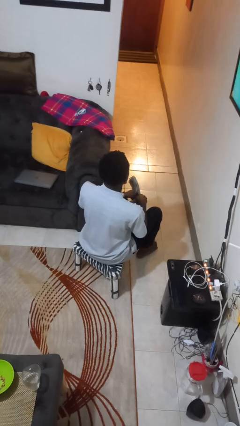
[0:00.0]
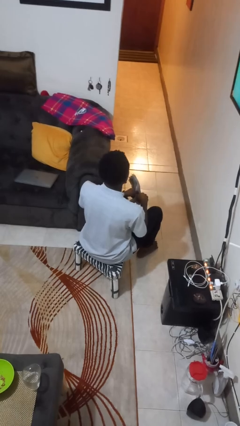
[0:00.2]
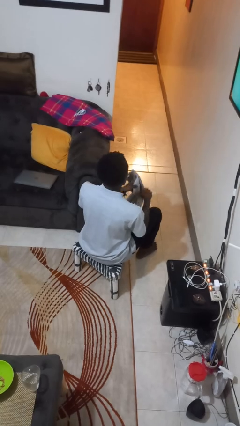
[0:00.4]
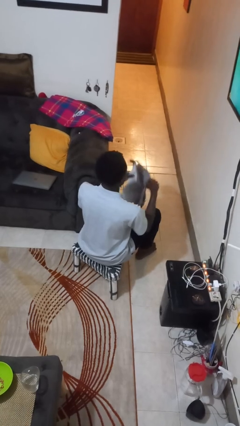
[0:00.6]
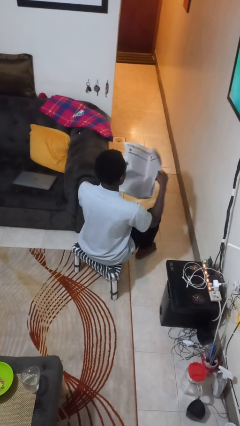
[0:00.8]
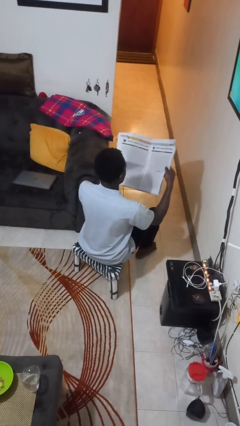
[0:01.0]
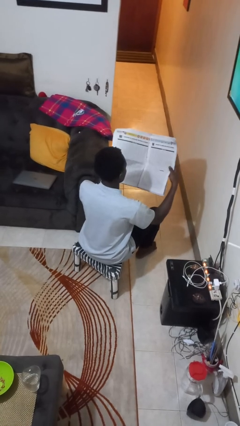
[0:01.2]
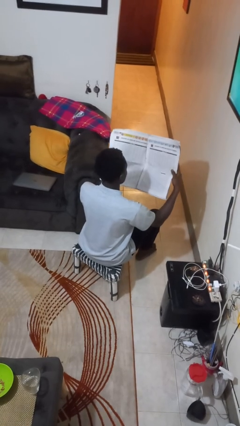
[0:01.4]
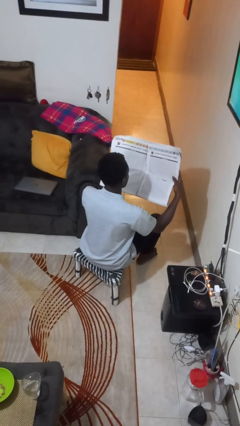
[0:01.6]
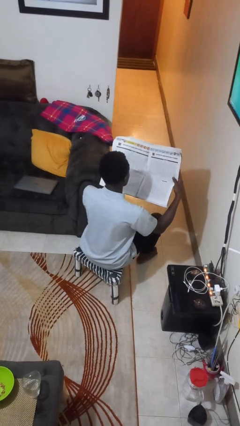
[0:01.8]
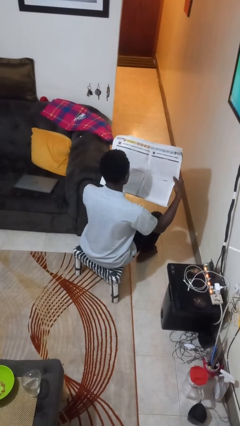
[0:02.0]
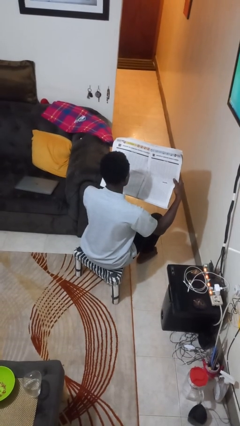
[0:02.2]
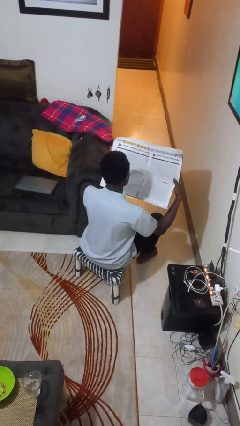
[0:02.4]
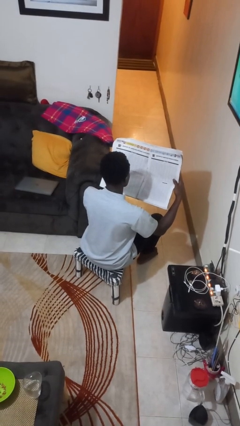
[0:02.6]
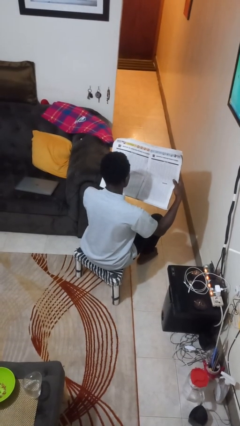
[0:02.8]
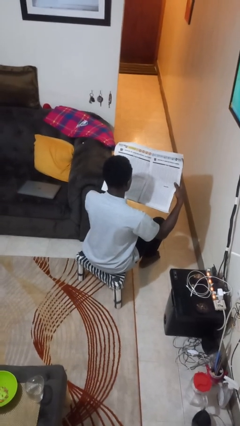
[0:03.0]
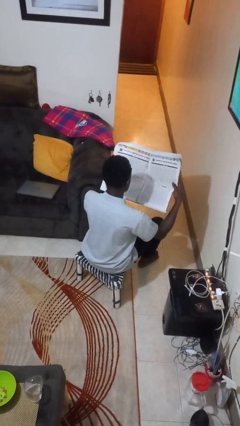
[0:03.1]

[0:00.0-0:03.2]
person reads newspaper

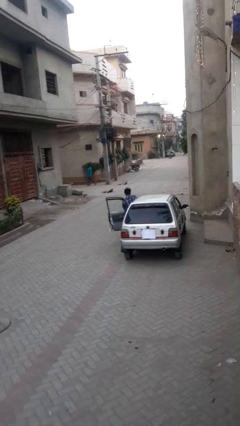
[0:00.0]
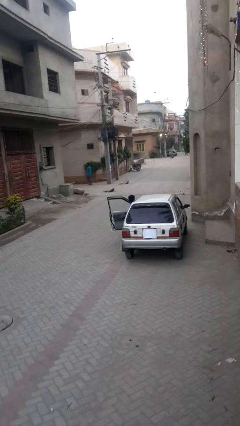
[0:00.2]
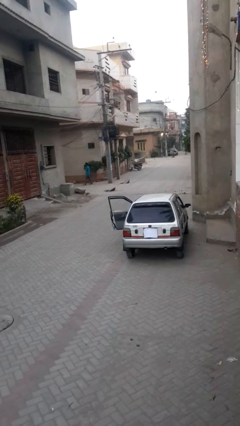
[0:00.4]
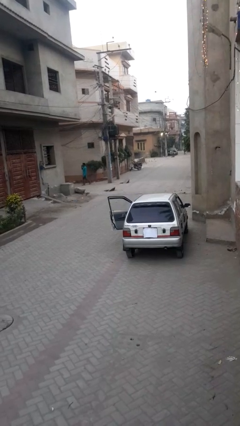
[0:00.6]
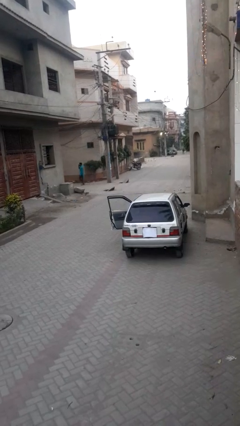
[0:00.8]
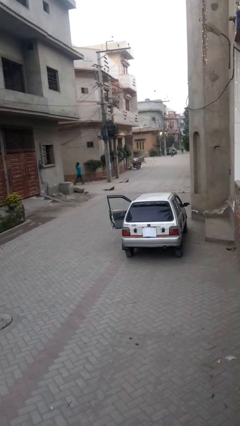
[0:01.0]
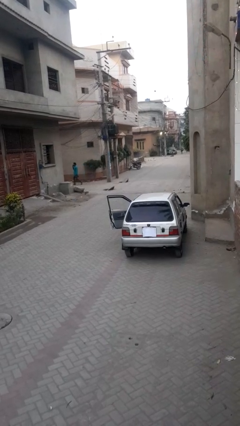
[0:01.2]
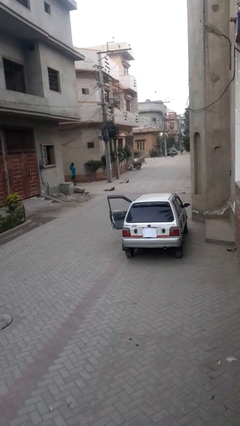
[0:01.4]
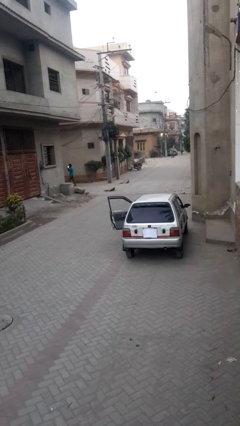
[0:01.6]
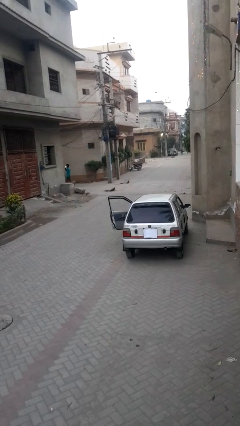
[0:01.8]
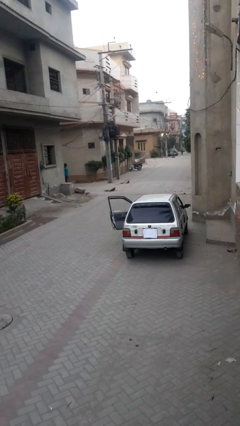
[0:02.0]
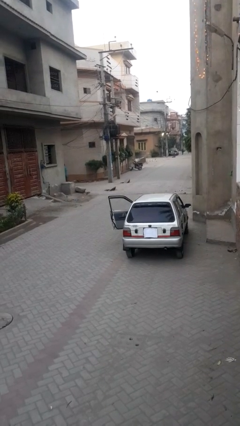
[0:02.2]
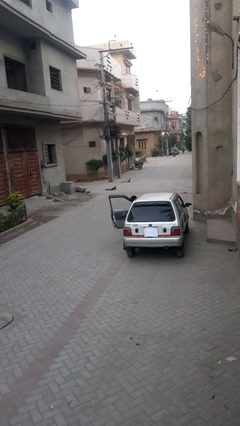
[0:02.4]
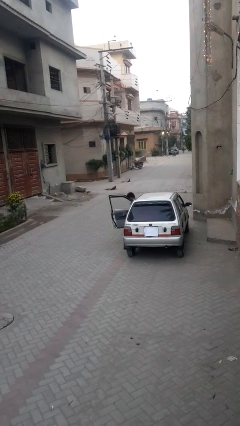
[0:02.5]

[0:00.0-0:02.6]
person enters car

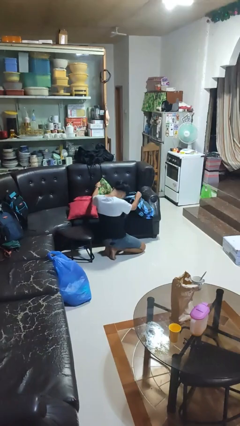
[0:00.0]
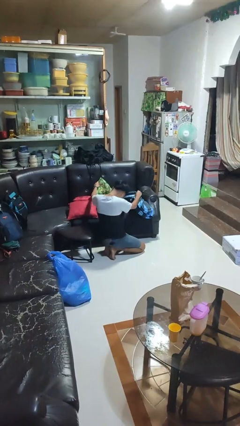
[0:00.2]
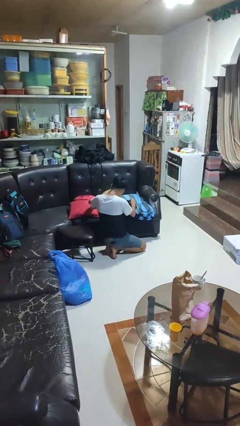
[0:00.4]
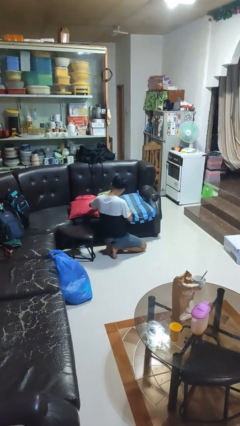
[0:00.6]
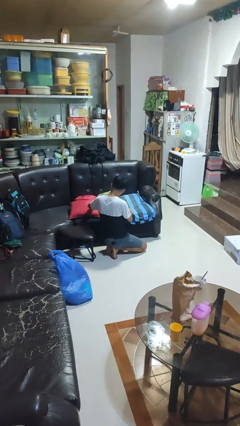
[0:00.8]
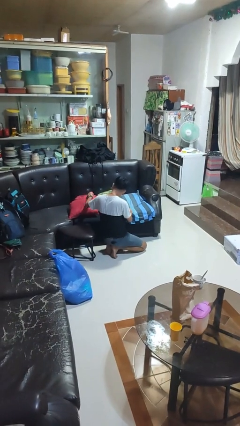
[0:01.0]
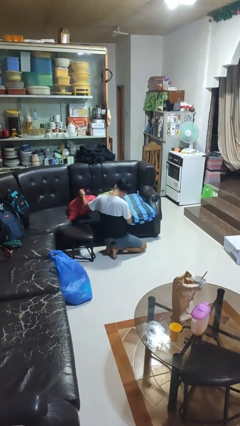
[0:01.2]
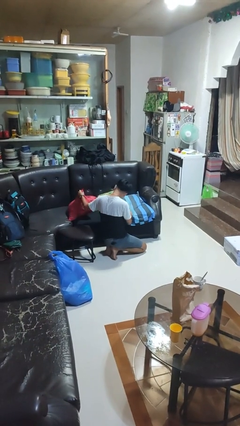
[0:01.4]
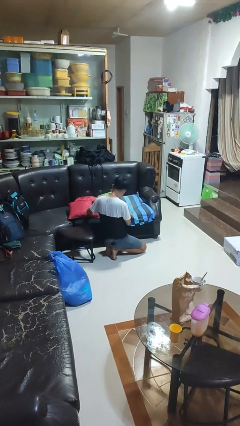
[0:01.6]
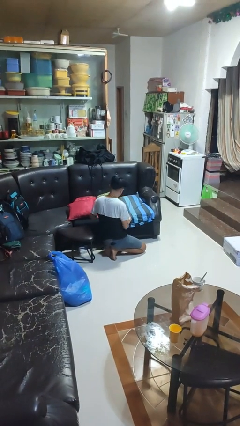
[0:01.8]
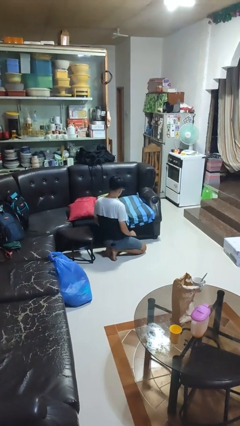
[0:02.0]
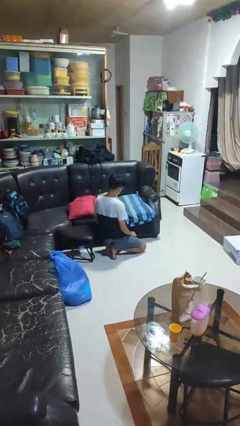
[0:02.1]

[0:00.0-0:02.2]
person searches in couch

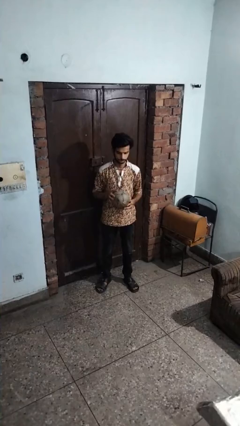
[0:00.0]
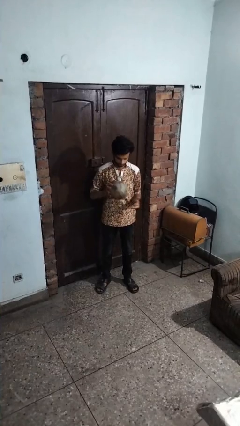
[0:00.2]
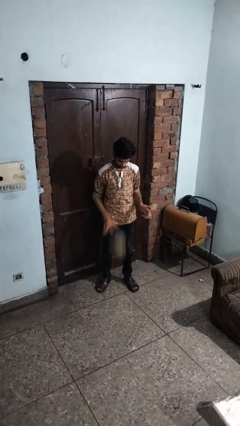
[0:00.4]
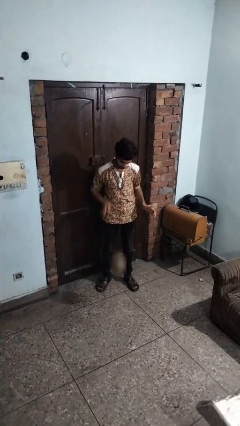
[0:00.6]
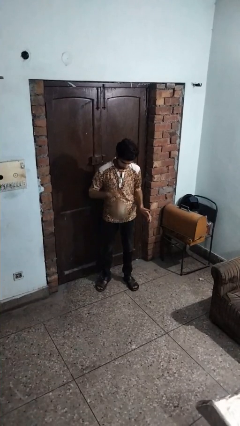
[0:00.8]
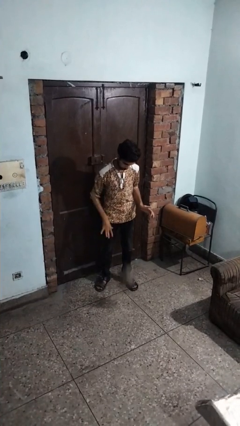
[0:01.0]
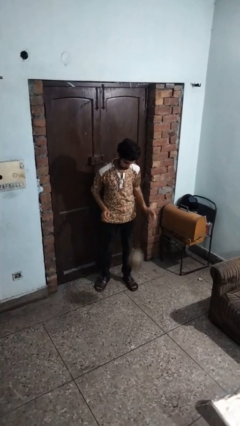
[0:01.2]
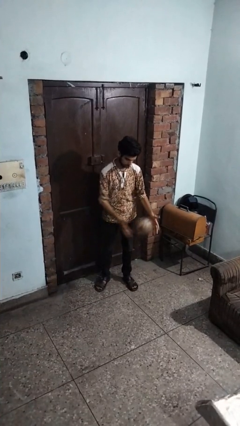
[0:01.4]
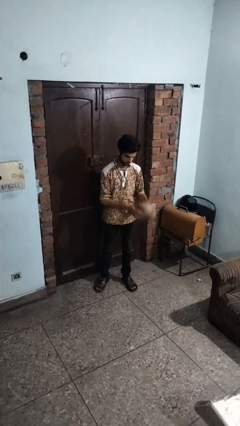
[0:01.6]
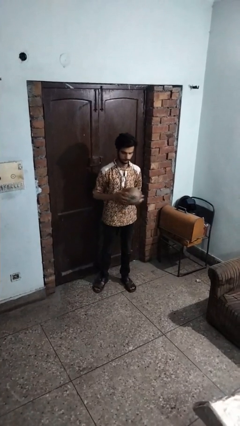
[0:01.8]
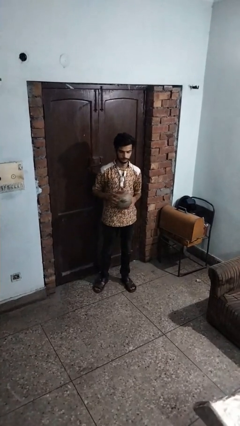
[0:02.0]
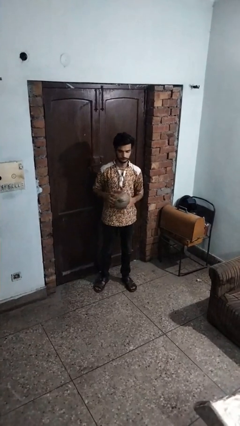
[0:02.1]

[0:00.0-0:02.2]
person bounces ball on floor

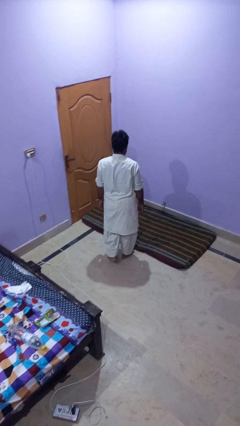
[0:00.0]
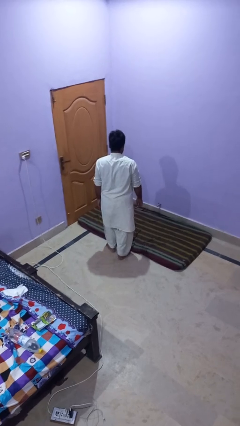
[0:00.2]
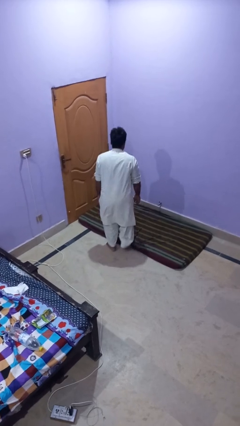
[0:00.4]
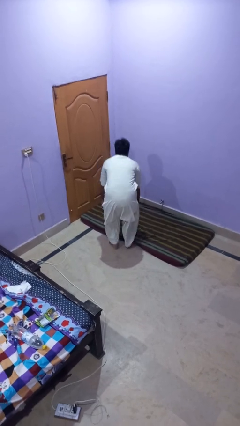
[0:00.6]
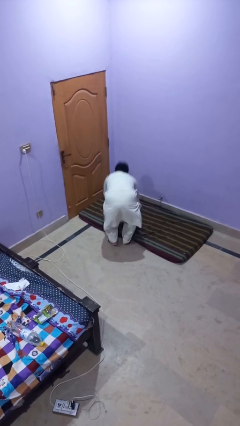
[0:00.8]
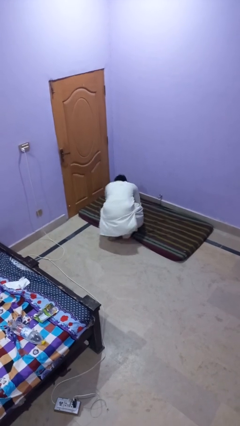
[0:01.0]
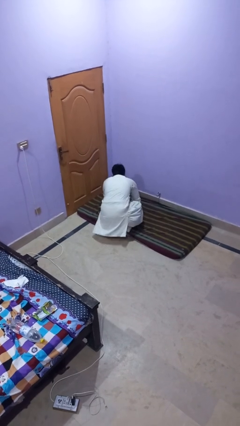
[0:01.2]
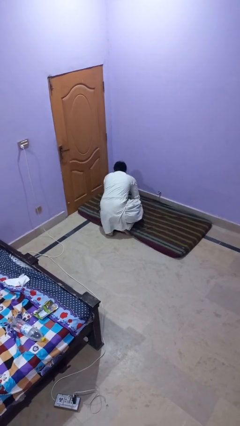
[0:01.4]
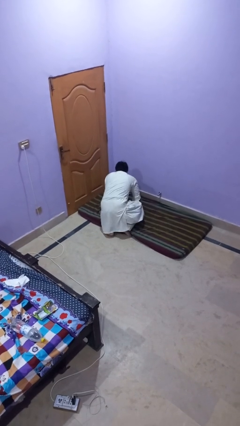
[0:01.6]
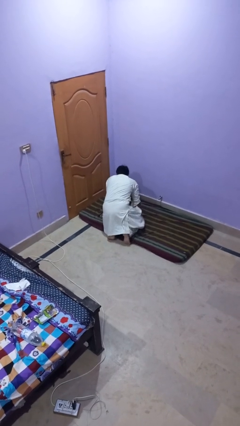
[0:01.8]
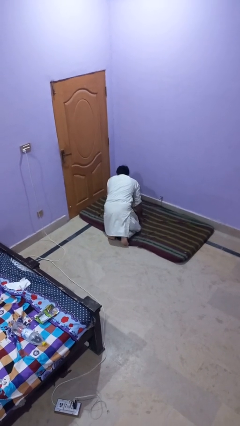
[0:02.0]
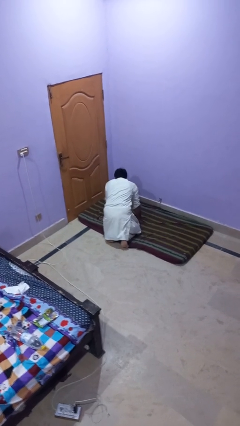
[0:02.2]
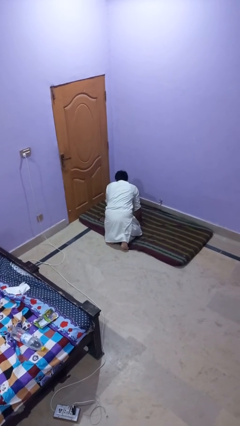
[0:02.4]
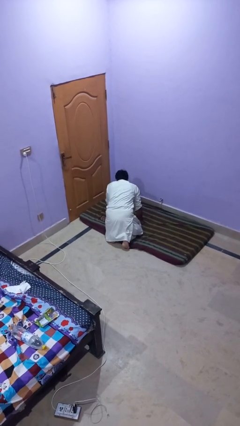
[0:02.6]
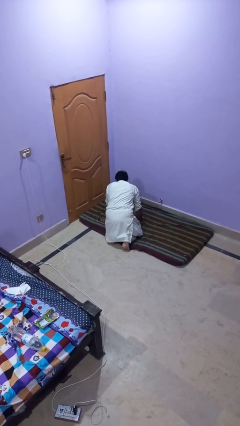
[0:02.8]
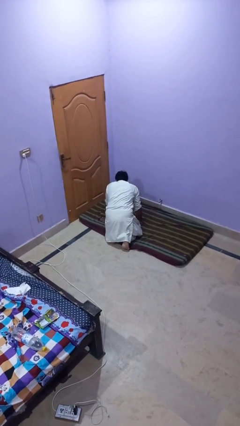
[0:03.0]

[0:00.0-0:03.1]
person trips on object on floor

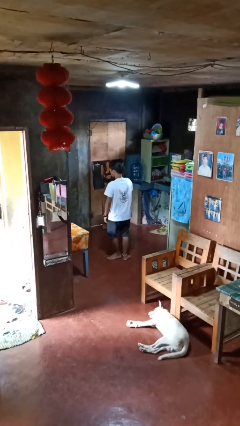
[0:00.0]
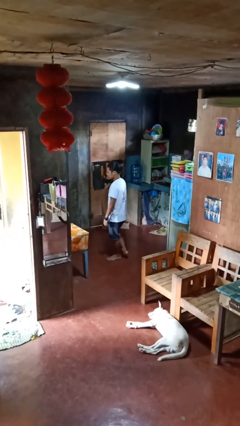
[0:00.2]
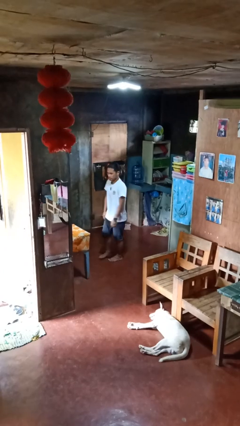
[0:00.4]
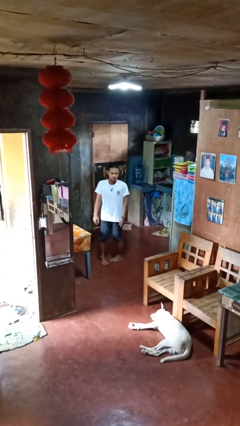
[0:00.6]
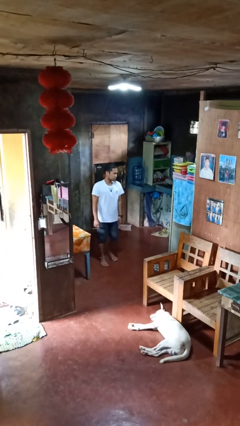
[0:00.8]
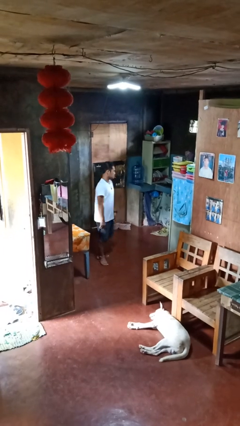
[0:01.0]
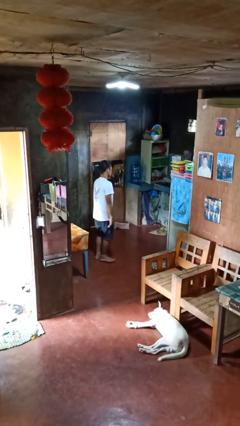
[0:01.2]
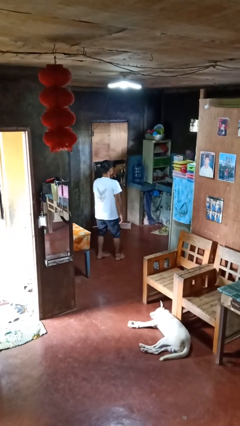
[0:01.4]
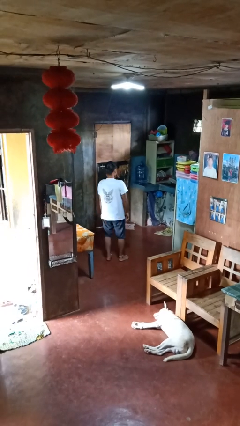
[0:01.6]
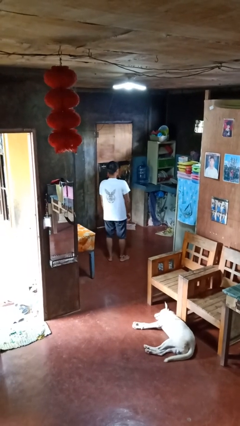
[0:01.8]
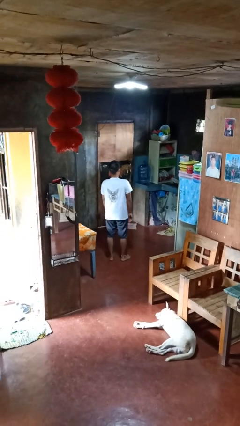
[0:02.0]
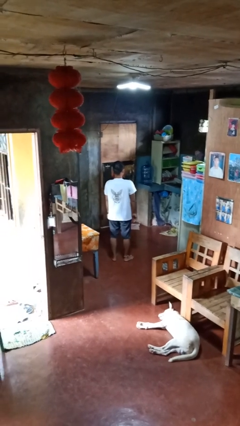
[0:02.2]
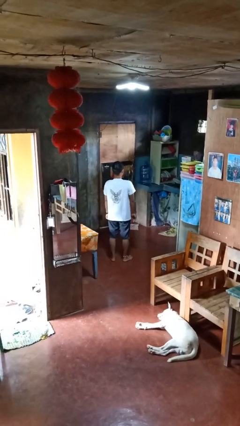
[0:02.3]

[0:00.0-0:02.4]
person twirls

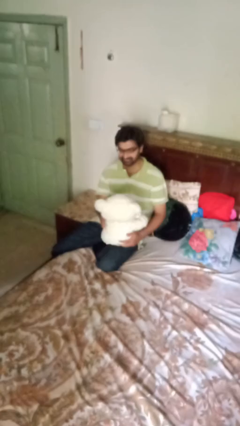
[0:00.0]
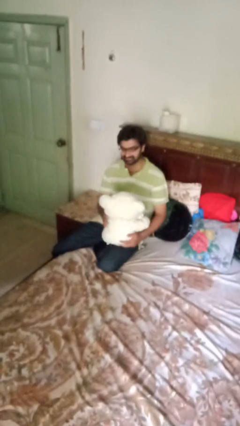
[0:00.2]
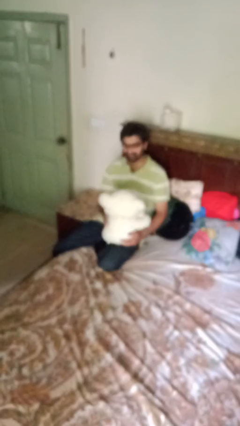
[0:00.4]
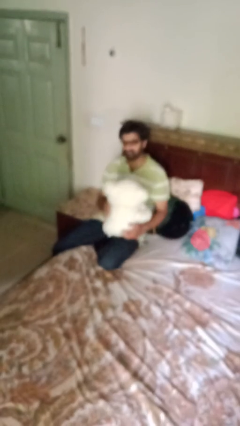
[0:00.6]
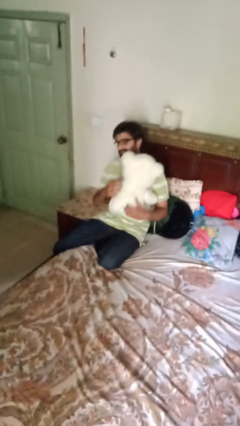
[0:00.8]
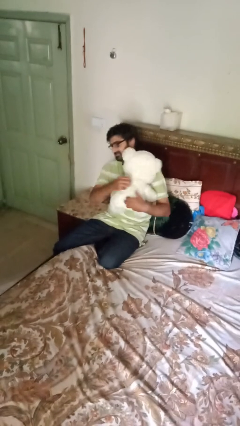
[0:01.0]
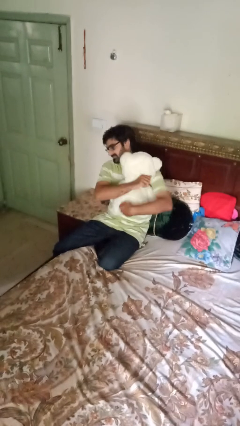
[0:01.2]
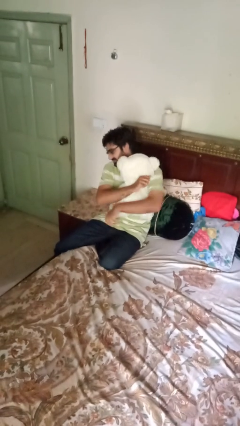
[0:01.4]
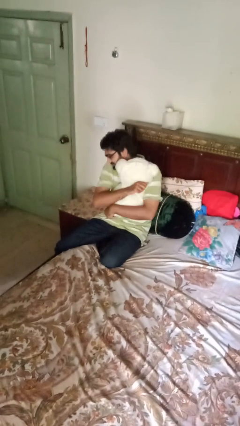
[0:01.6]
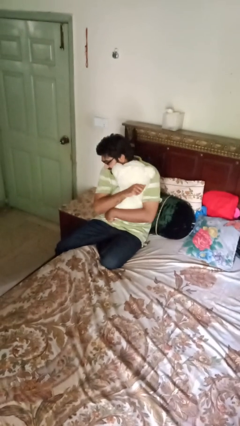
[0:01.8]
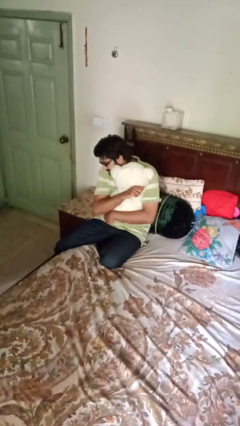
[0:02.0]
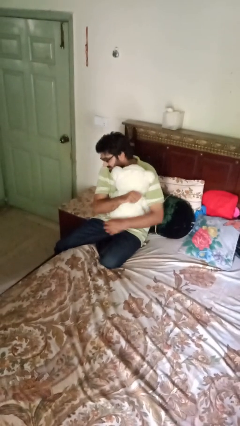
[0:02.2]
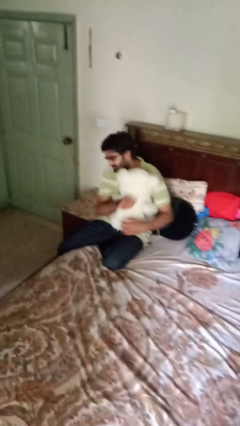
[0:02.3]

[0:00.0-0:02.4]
person hugs stuffed animal
